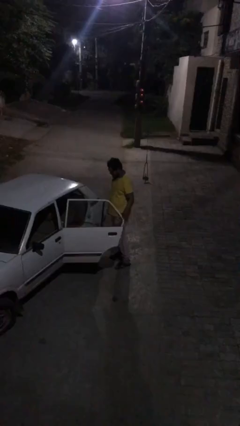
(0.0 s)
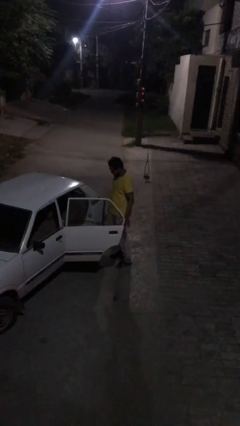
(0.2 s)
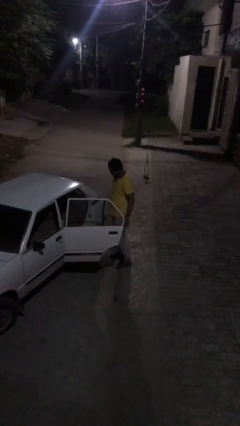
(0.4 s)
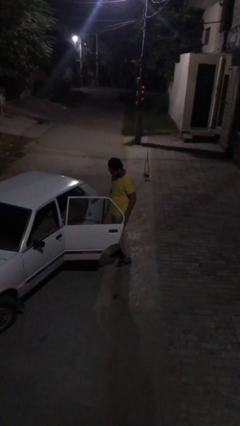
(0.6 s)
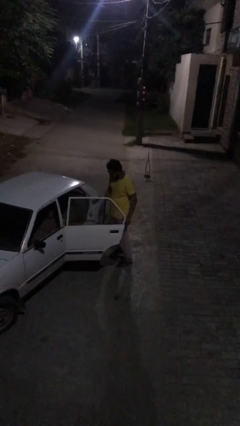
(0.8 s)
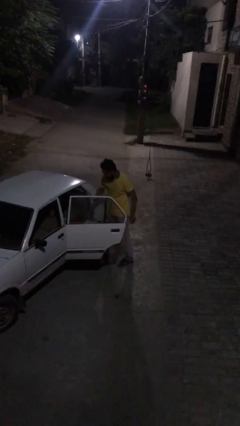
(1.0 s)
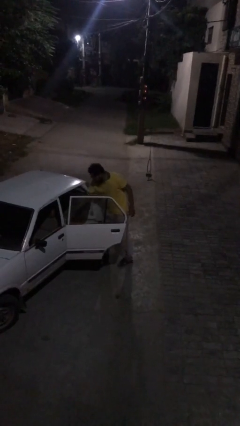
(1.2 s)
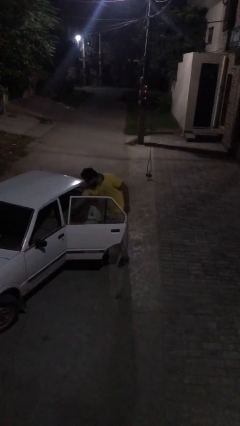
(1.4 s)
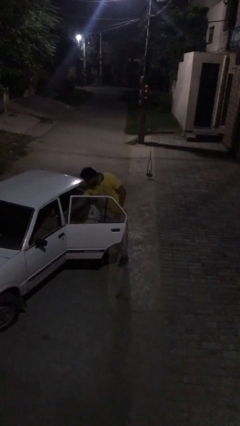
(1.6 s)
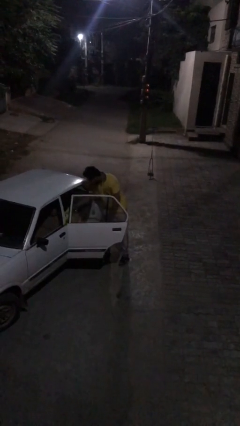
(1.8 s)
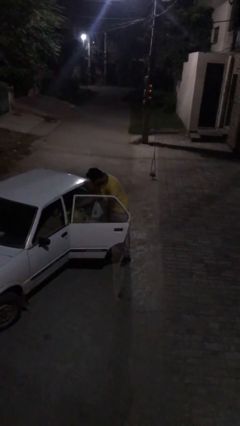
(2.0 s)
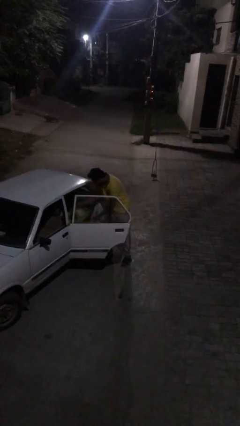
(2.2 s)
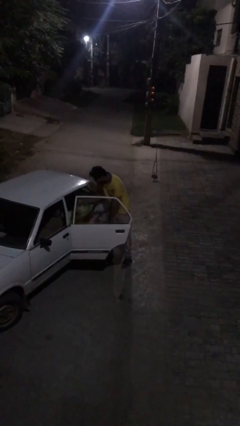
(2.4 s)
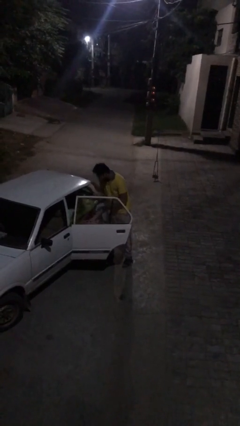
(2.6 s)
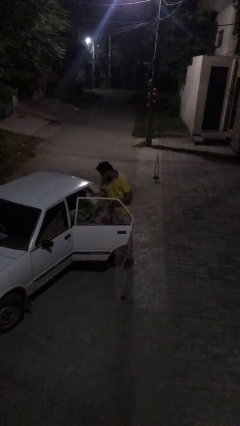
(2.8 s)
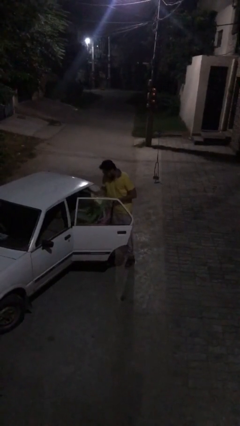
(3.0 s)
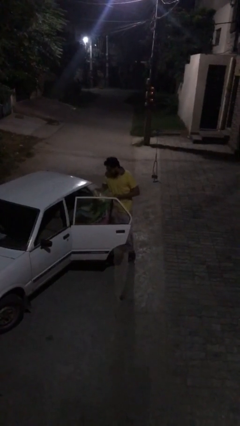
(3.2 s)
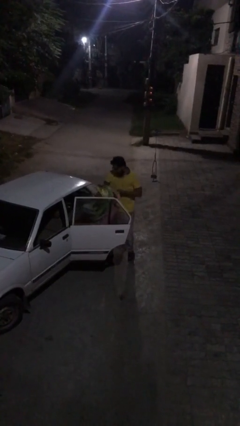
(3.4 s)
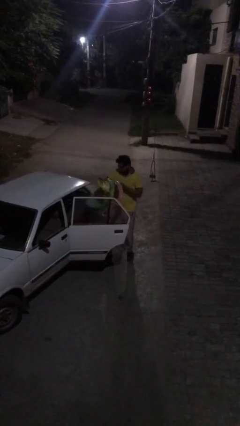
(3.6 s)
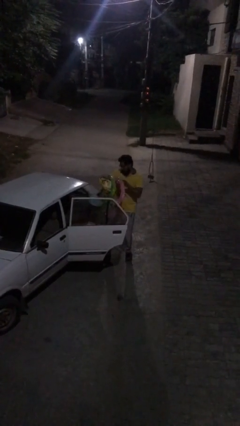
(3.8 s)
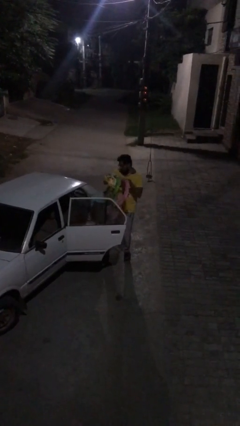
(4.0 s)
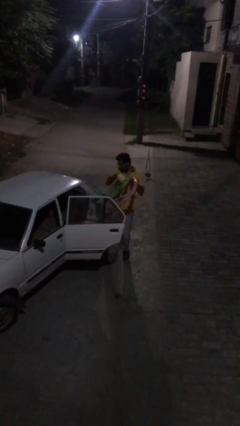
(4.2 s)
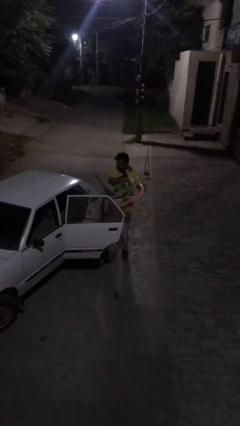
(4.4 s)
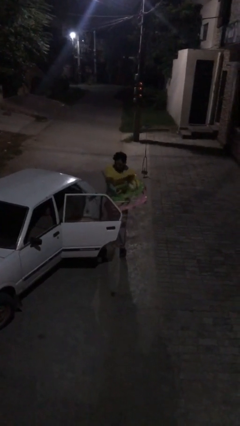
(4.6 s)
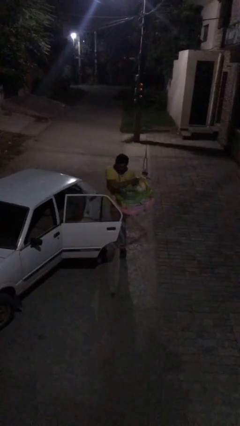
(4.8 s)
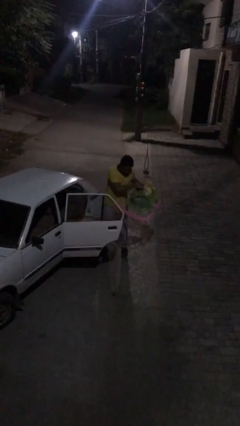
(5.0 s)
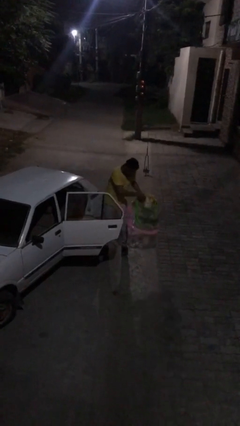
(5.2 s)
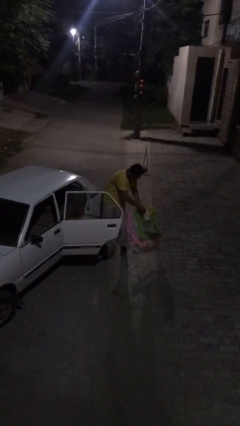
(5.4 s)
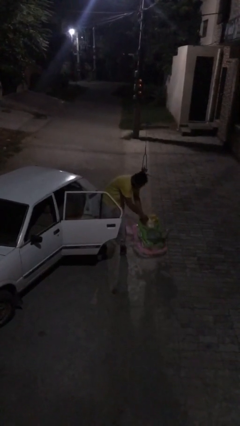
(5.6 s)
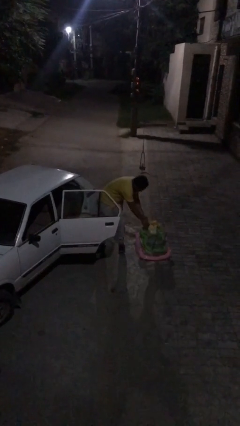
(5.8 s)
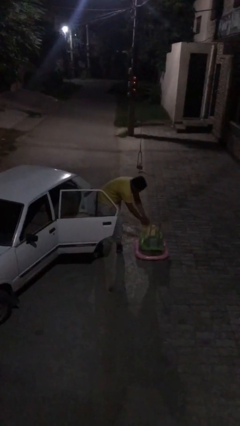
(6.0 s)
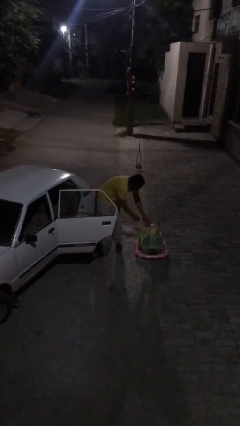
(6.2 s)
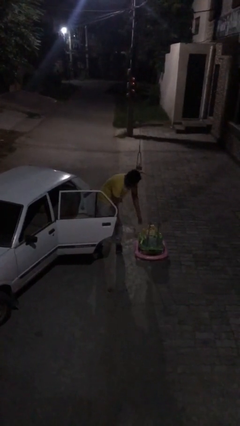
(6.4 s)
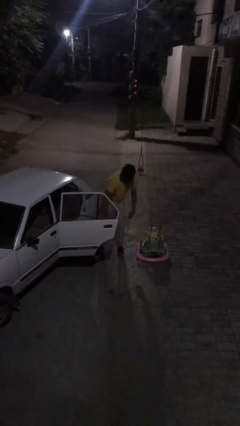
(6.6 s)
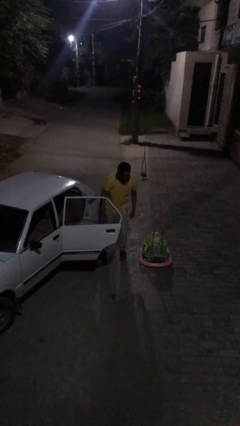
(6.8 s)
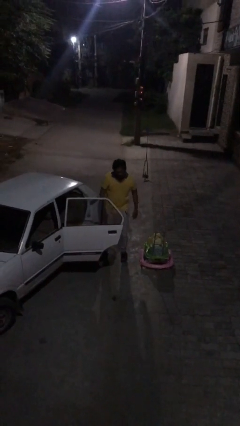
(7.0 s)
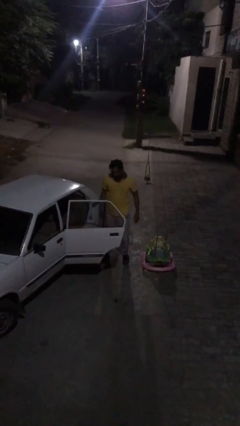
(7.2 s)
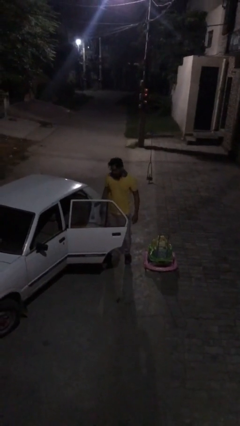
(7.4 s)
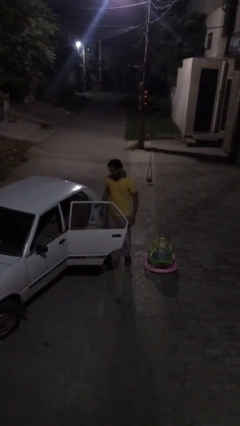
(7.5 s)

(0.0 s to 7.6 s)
person unloads car

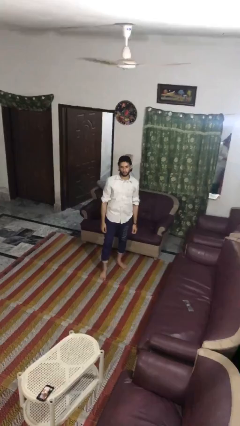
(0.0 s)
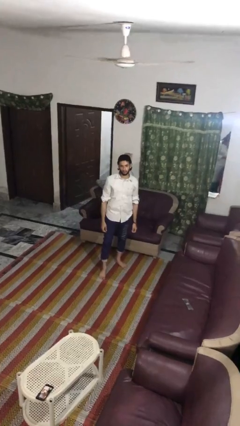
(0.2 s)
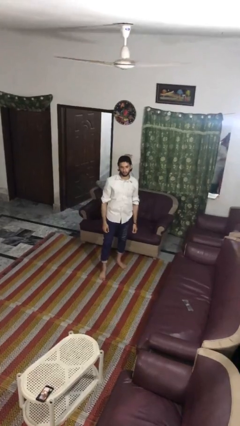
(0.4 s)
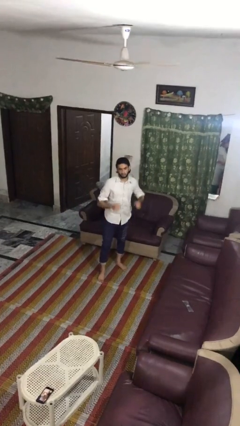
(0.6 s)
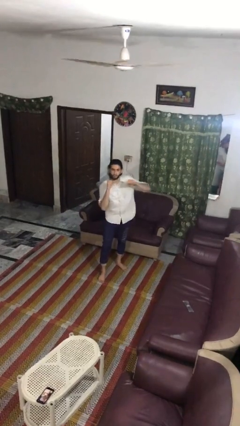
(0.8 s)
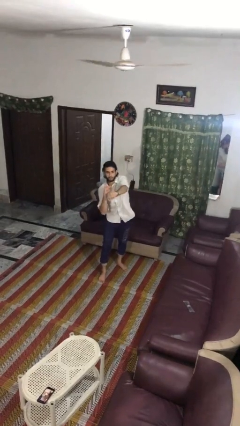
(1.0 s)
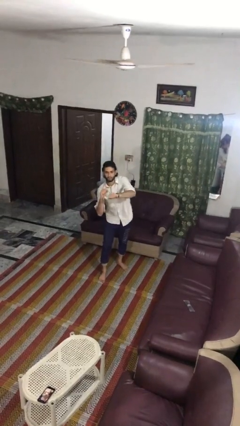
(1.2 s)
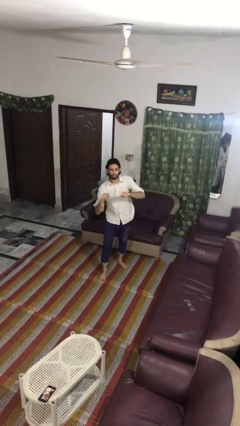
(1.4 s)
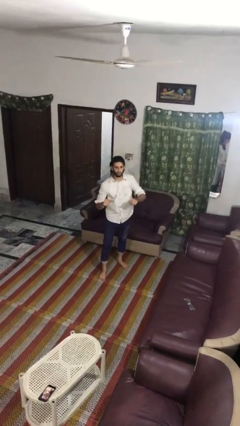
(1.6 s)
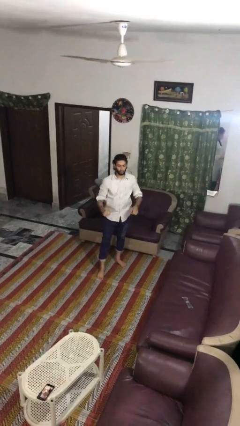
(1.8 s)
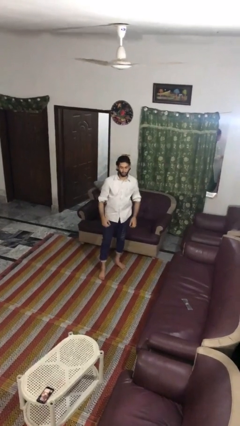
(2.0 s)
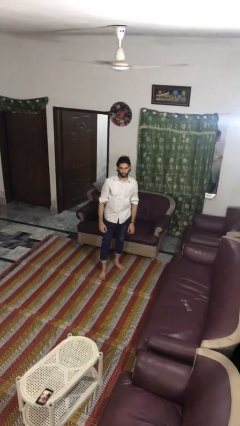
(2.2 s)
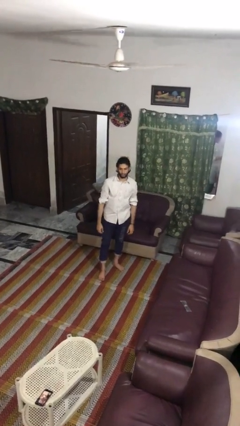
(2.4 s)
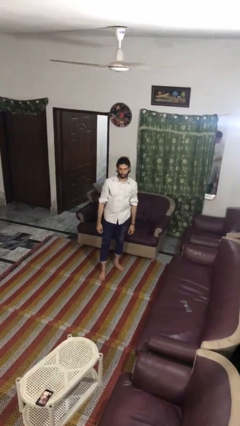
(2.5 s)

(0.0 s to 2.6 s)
person punches

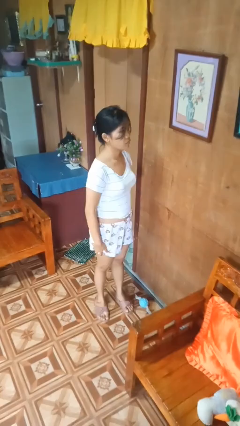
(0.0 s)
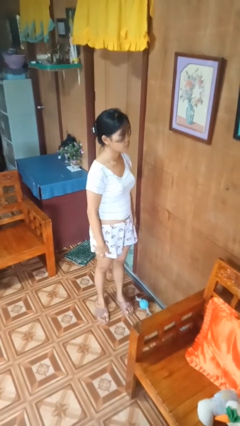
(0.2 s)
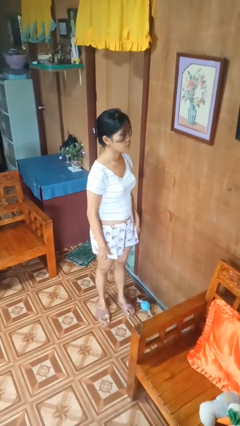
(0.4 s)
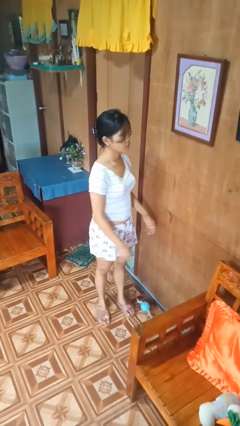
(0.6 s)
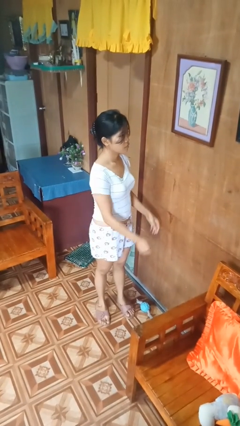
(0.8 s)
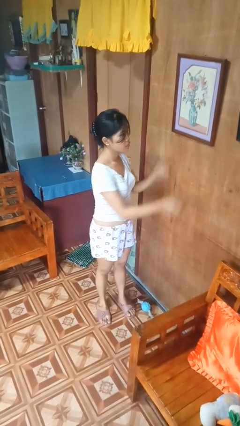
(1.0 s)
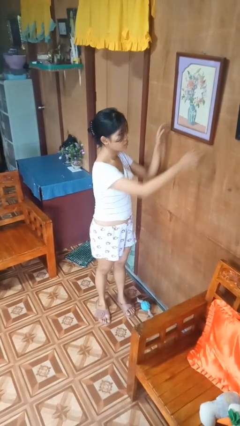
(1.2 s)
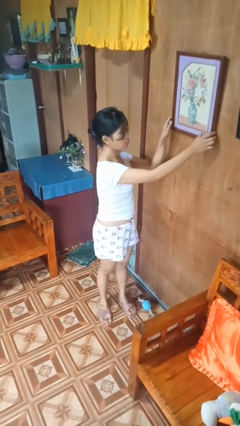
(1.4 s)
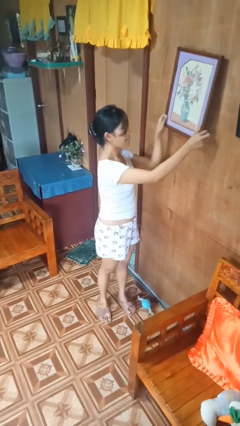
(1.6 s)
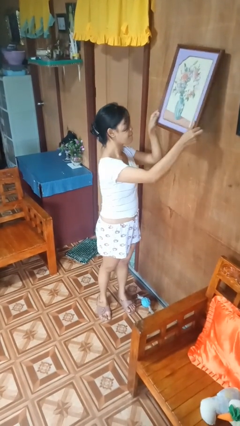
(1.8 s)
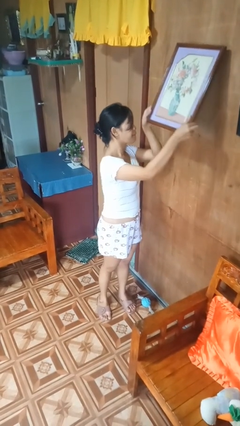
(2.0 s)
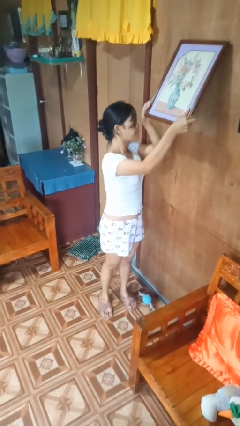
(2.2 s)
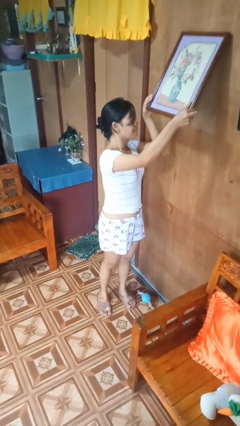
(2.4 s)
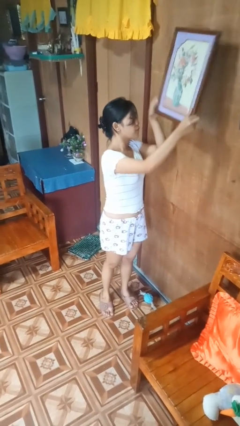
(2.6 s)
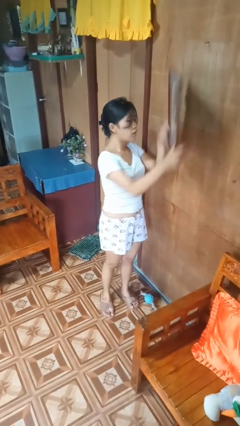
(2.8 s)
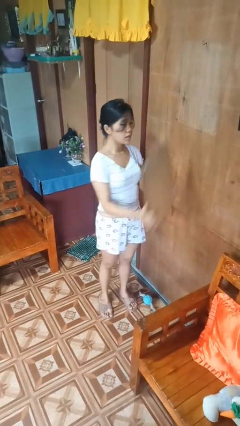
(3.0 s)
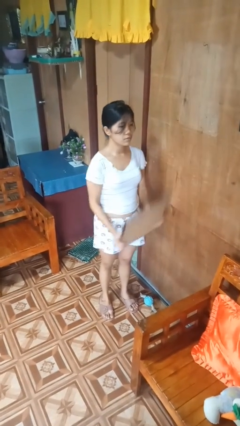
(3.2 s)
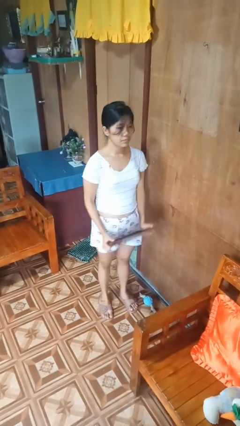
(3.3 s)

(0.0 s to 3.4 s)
person takes down picture frame

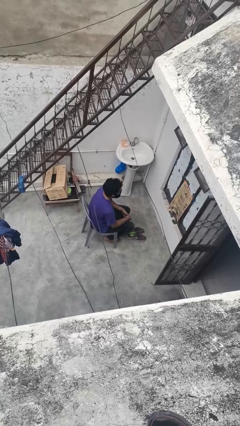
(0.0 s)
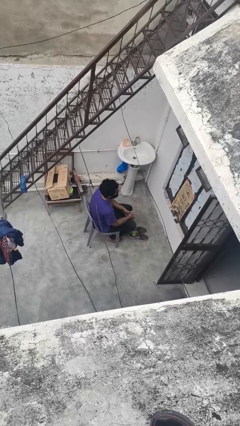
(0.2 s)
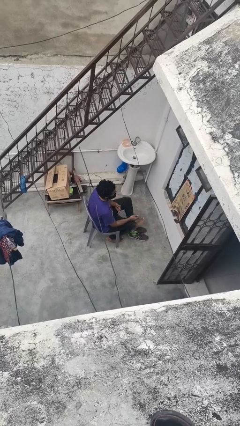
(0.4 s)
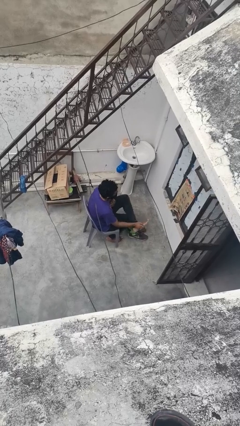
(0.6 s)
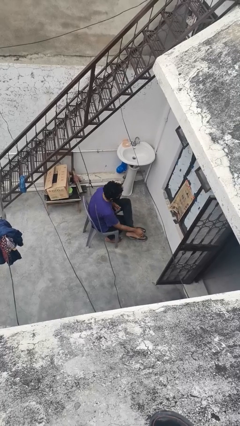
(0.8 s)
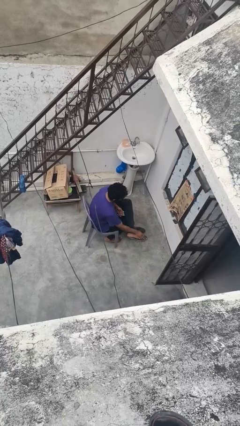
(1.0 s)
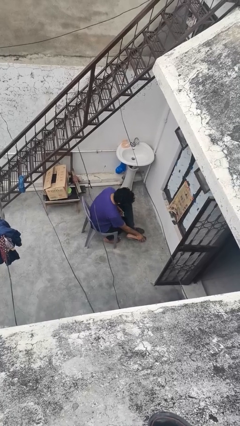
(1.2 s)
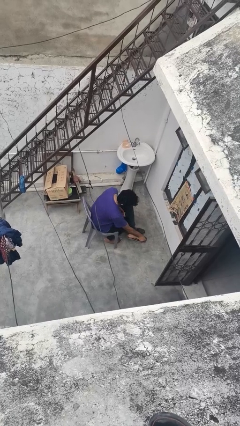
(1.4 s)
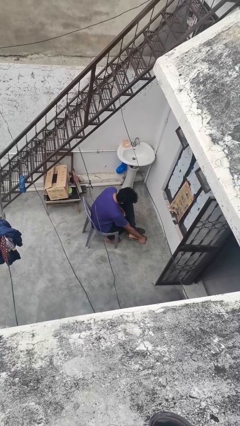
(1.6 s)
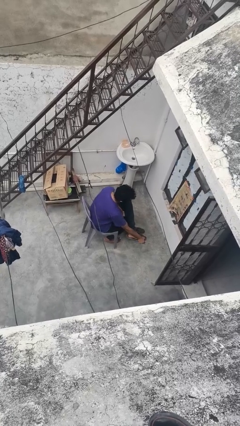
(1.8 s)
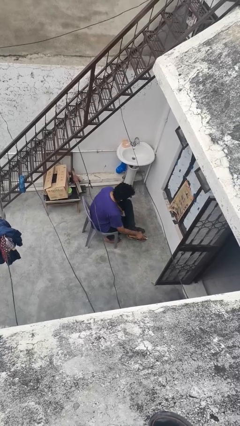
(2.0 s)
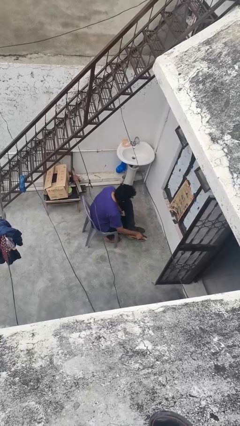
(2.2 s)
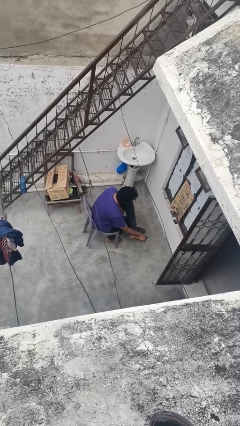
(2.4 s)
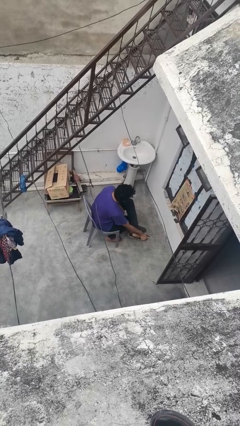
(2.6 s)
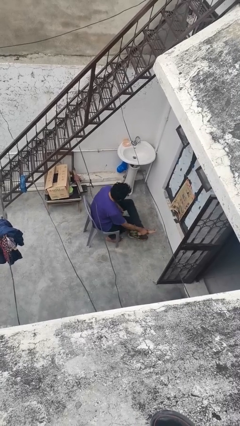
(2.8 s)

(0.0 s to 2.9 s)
person rubs foot

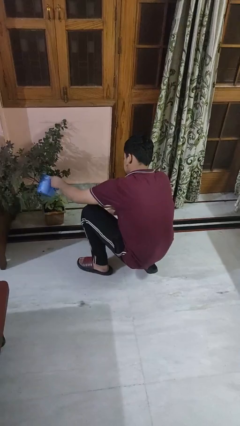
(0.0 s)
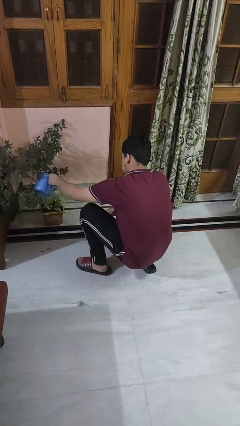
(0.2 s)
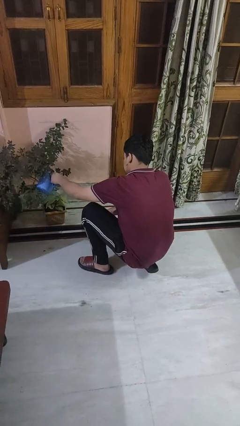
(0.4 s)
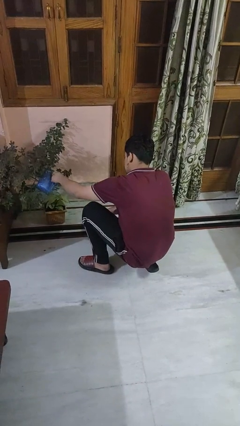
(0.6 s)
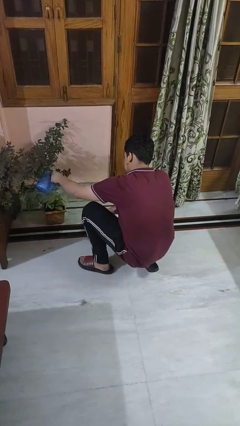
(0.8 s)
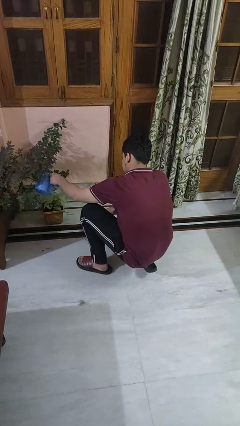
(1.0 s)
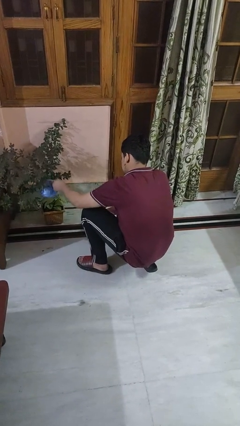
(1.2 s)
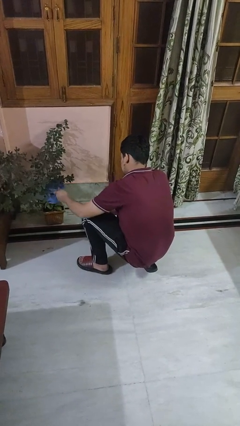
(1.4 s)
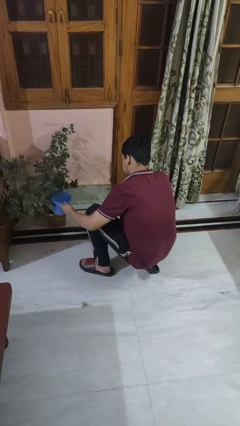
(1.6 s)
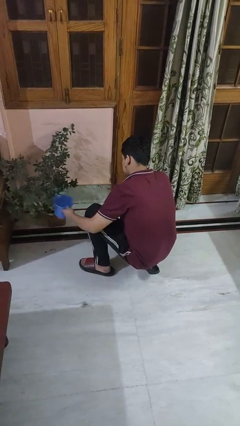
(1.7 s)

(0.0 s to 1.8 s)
person waters houseplant
